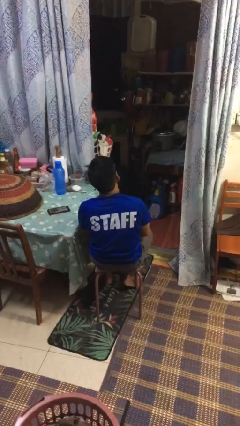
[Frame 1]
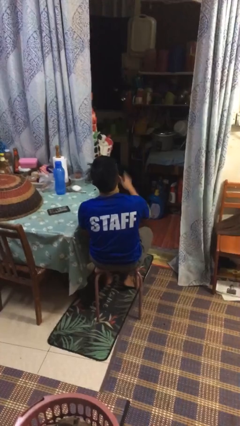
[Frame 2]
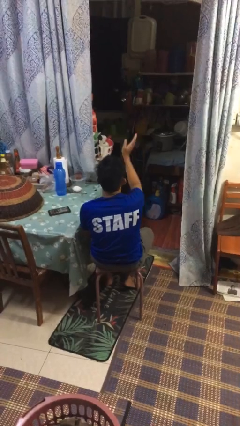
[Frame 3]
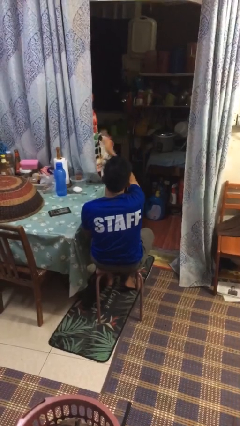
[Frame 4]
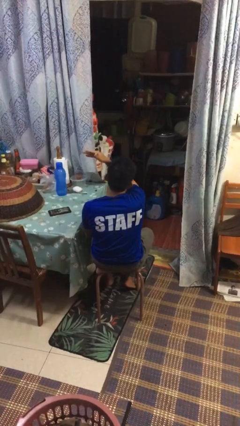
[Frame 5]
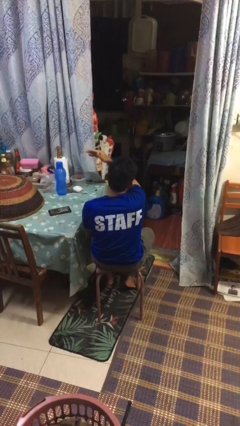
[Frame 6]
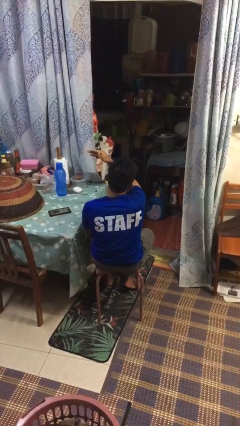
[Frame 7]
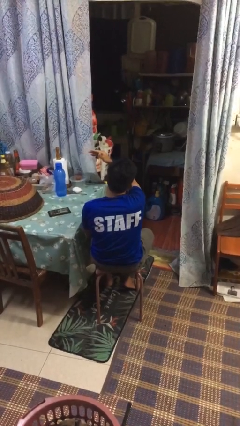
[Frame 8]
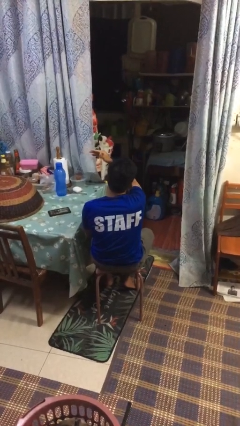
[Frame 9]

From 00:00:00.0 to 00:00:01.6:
person gestures swipe left

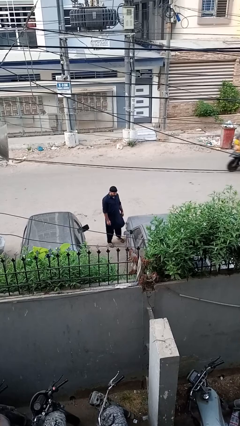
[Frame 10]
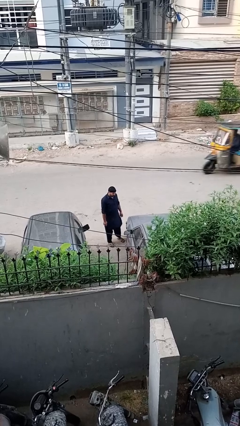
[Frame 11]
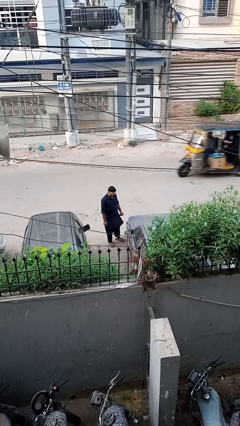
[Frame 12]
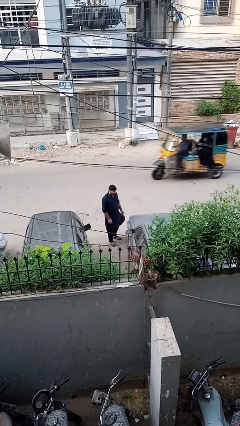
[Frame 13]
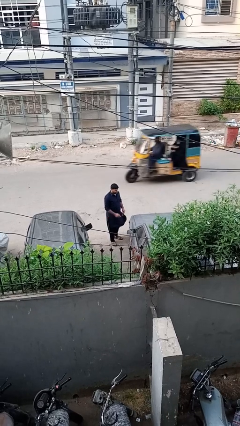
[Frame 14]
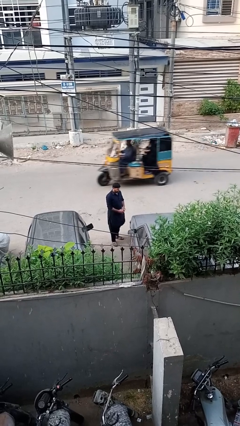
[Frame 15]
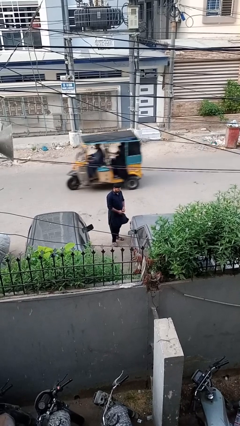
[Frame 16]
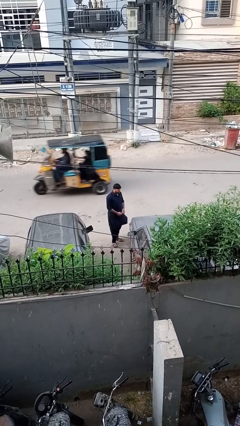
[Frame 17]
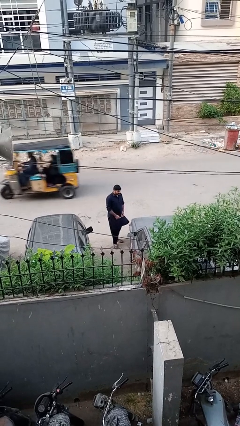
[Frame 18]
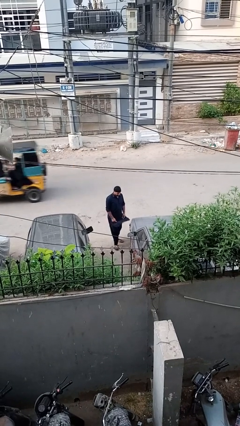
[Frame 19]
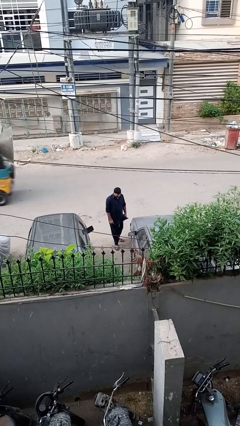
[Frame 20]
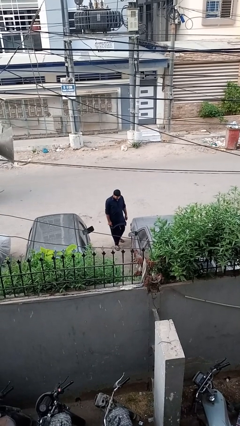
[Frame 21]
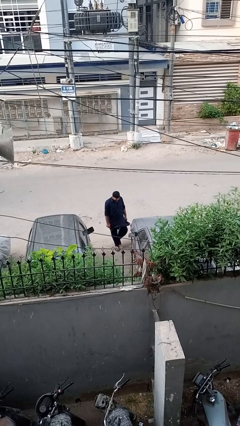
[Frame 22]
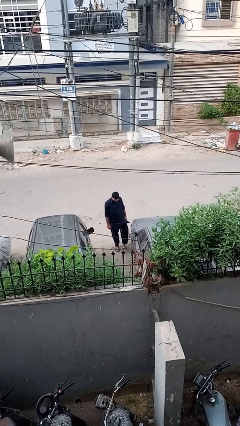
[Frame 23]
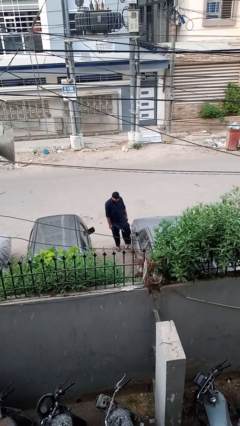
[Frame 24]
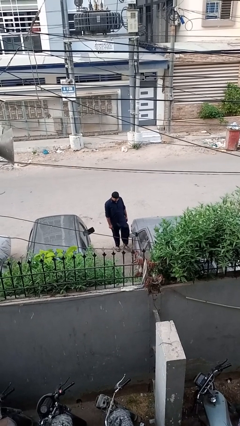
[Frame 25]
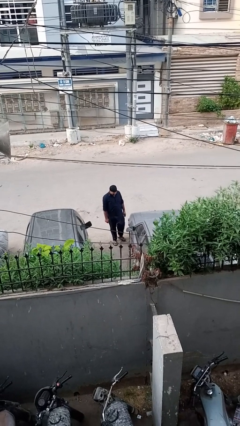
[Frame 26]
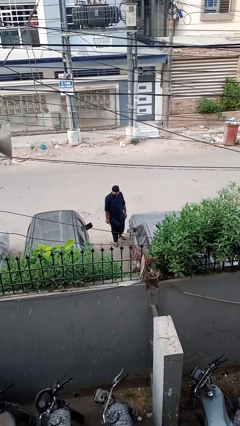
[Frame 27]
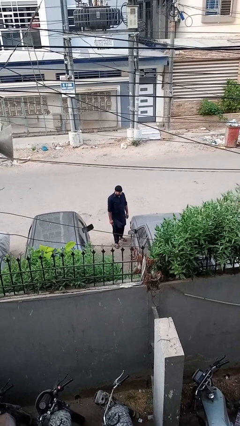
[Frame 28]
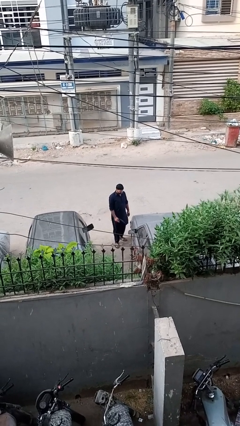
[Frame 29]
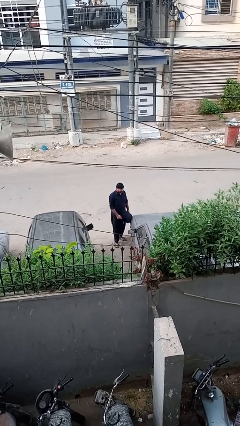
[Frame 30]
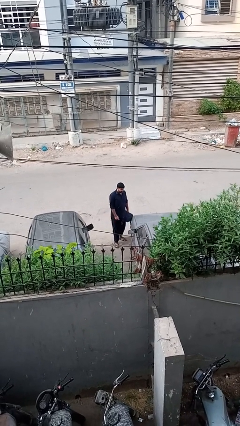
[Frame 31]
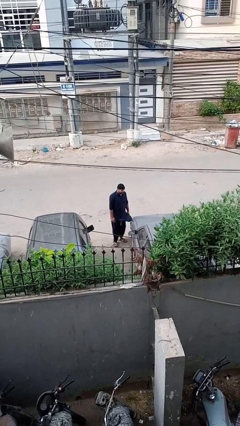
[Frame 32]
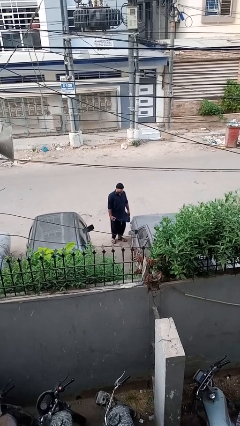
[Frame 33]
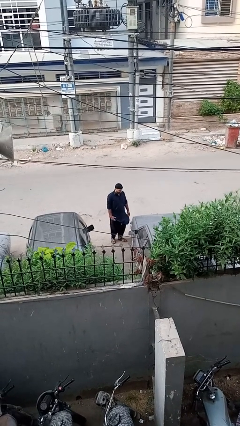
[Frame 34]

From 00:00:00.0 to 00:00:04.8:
person kicks car tires

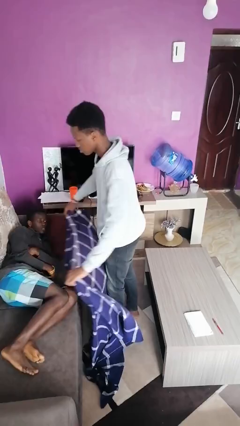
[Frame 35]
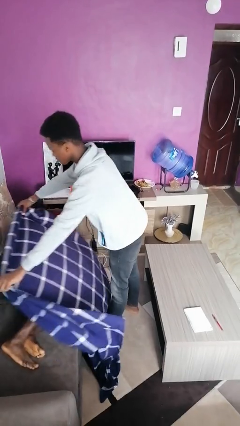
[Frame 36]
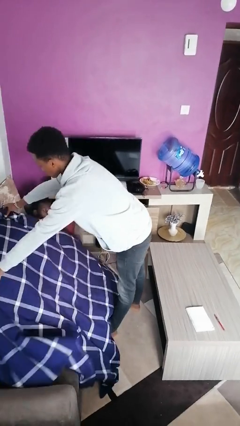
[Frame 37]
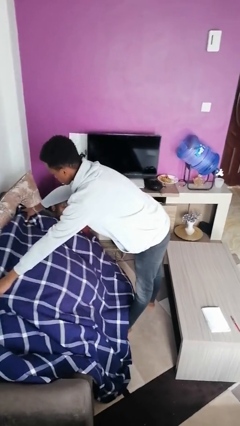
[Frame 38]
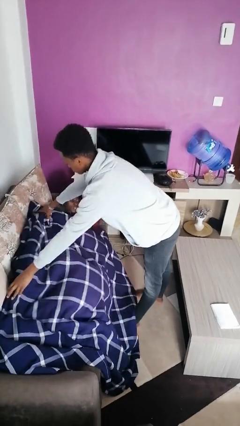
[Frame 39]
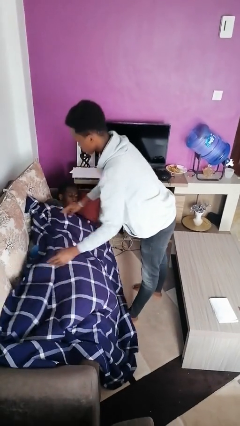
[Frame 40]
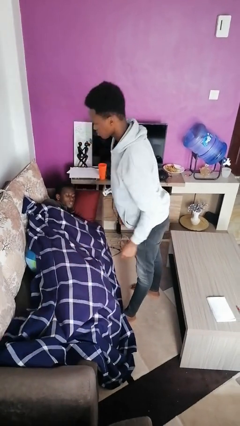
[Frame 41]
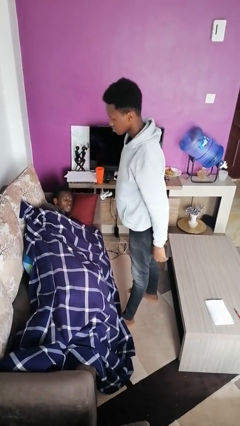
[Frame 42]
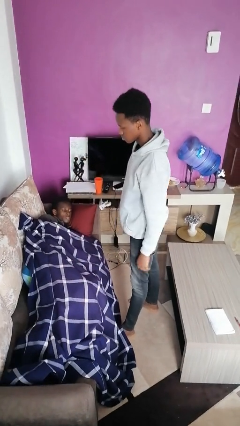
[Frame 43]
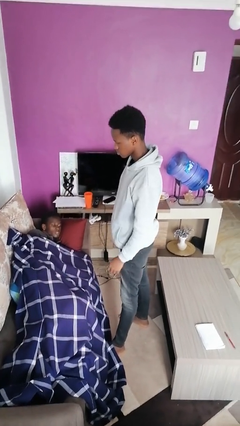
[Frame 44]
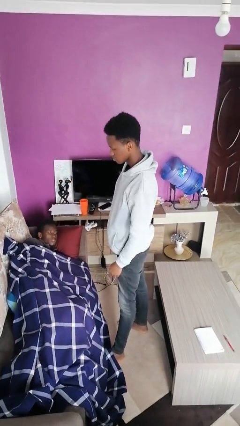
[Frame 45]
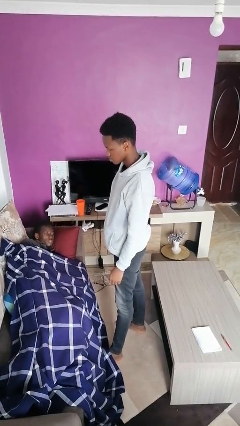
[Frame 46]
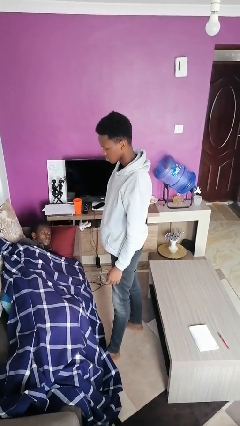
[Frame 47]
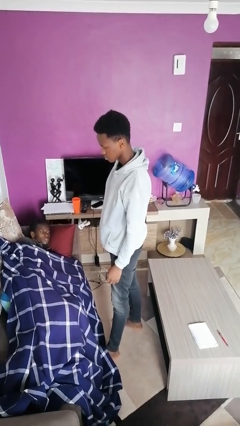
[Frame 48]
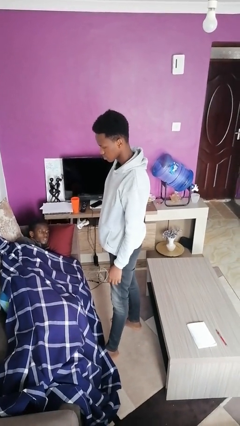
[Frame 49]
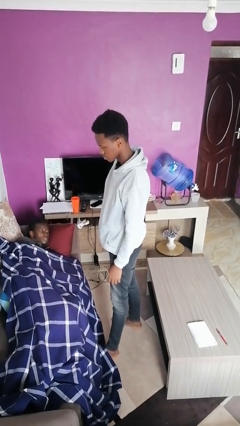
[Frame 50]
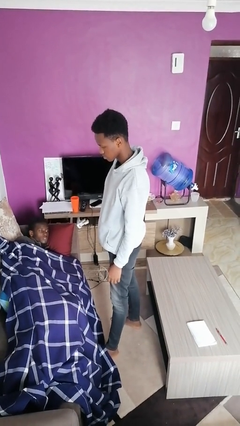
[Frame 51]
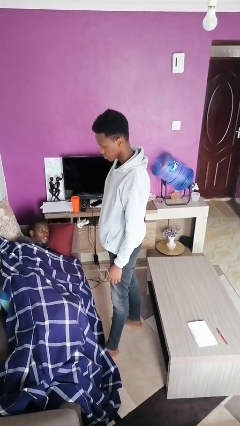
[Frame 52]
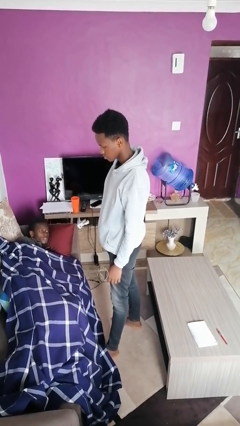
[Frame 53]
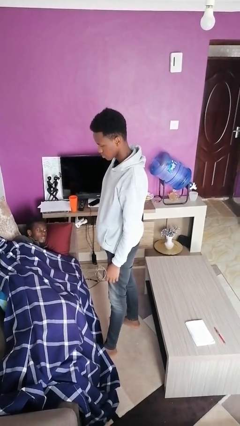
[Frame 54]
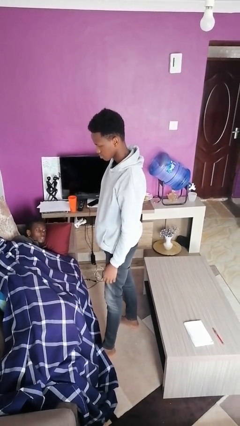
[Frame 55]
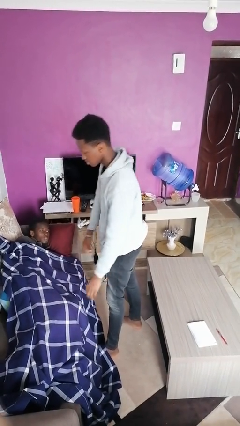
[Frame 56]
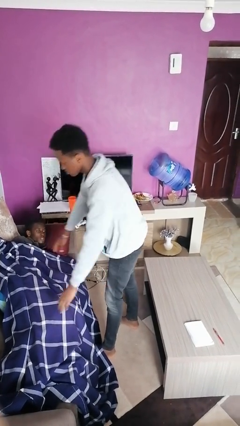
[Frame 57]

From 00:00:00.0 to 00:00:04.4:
person covers friend with blanket

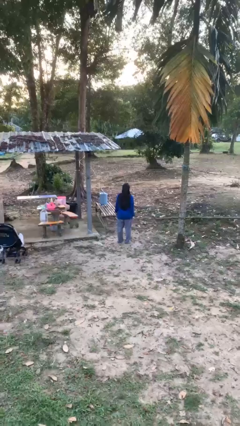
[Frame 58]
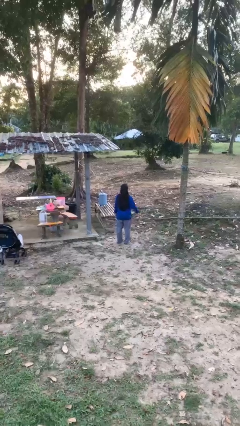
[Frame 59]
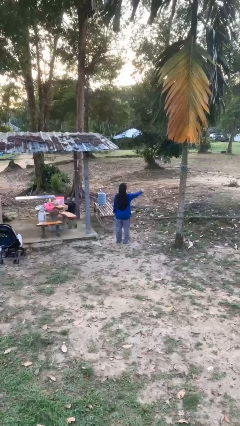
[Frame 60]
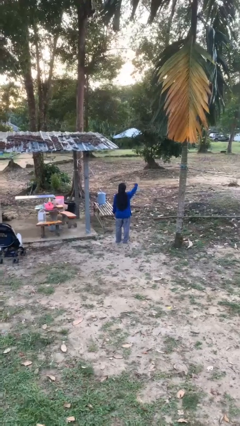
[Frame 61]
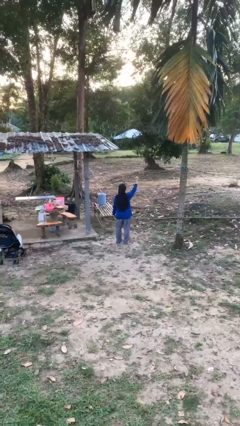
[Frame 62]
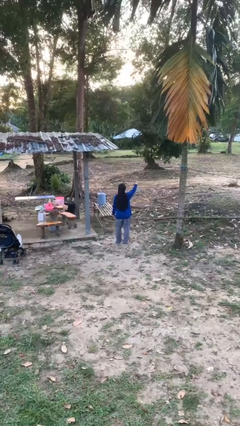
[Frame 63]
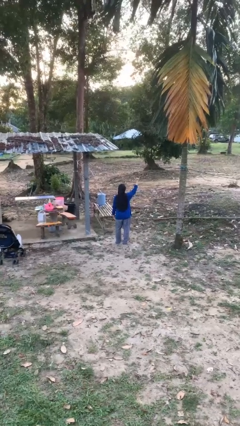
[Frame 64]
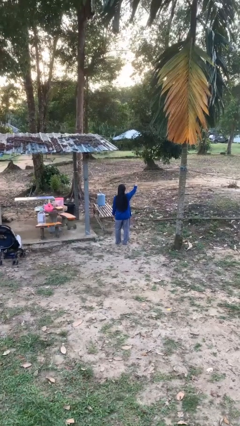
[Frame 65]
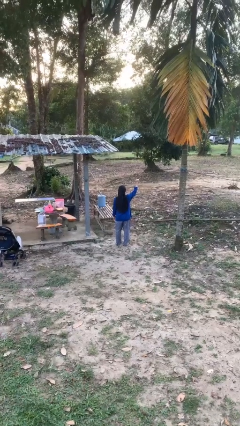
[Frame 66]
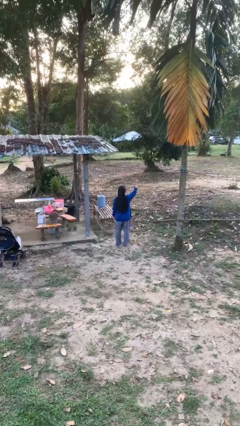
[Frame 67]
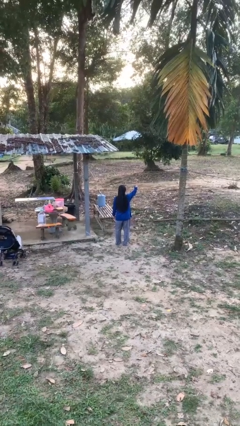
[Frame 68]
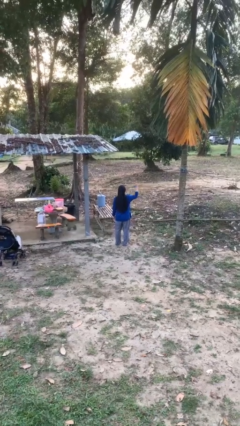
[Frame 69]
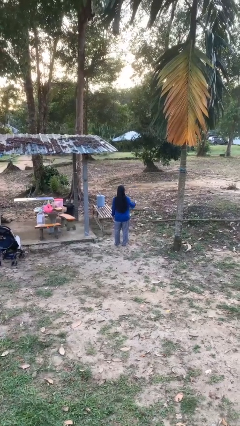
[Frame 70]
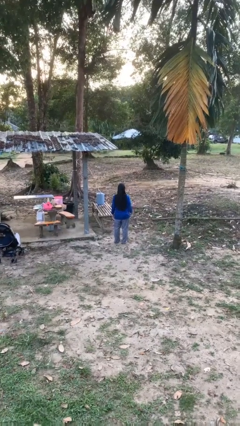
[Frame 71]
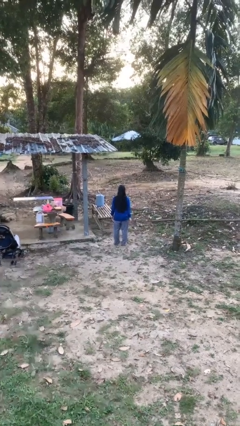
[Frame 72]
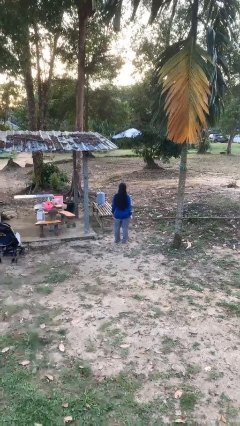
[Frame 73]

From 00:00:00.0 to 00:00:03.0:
person gestures hang loose

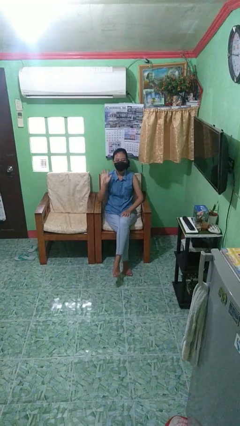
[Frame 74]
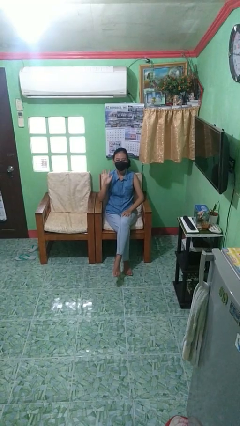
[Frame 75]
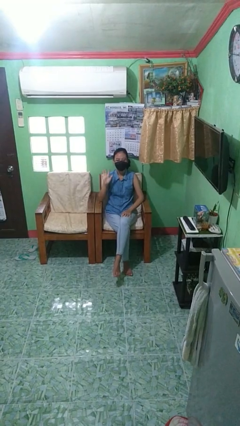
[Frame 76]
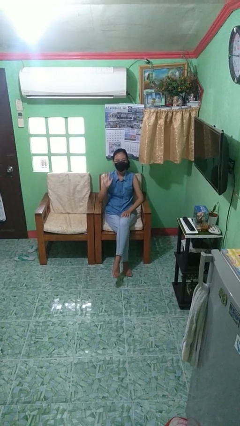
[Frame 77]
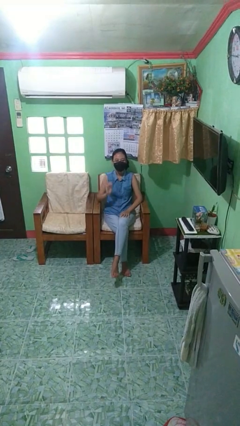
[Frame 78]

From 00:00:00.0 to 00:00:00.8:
person gestures number five

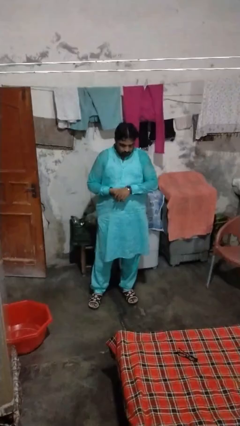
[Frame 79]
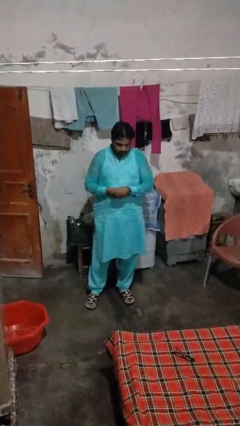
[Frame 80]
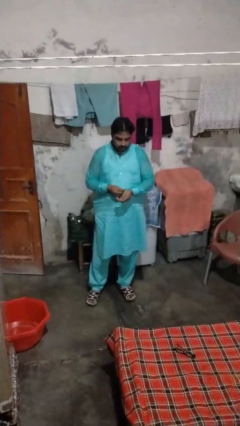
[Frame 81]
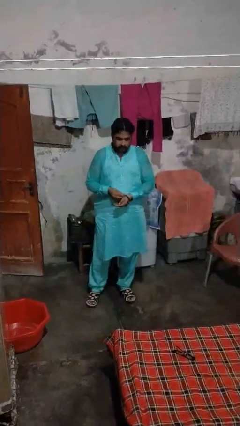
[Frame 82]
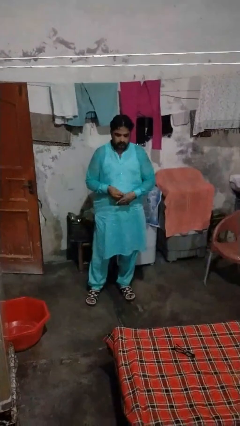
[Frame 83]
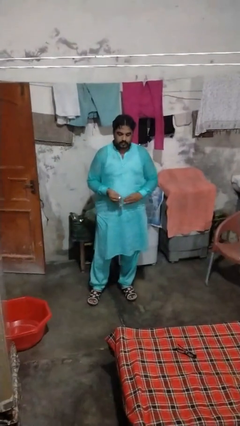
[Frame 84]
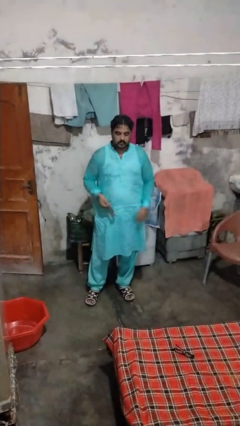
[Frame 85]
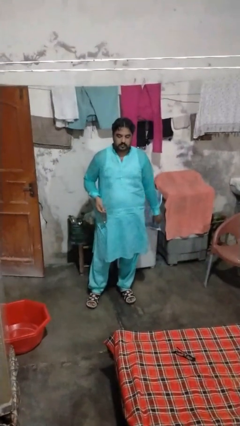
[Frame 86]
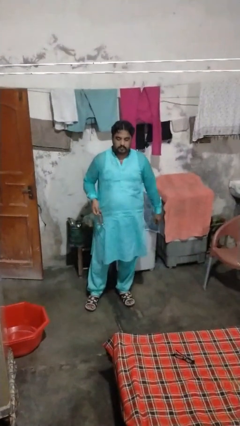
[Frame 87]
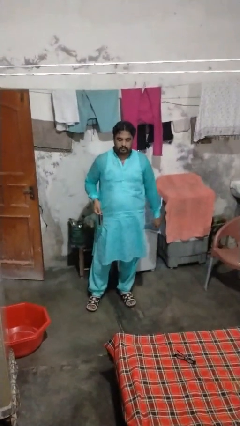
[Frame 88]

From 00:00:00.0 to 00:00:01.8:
person takes off wristwatch

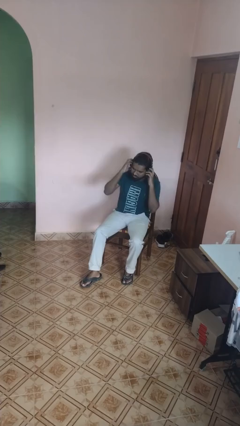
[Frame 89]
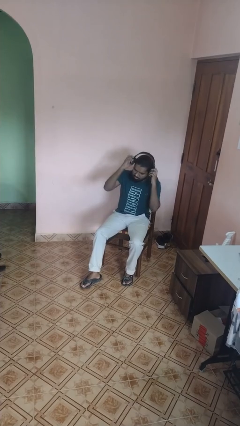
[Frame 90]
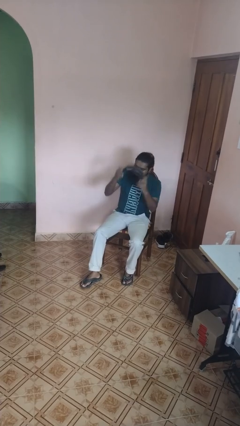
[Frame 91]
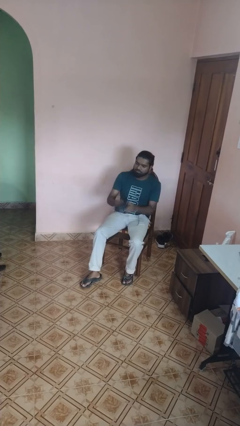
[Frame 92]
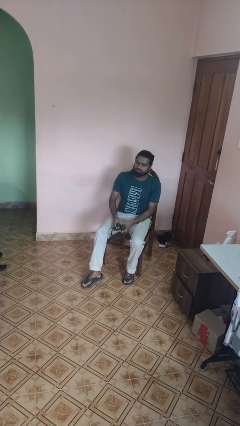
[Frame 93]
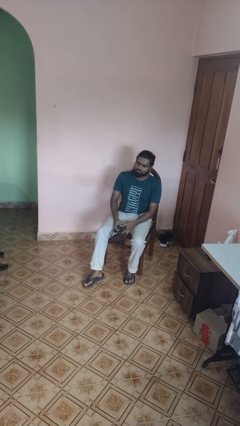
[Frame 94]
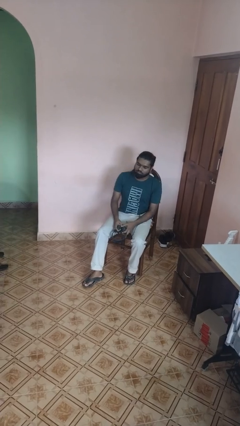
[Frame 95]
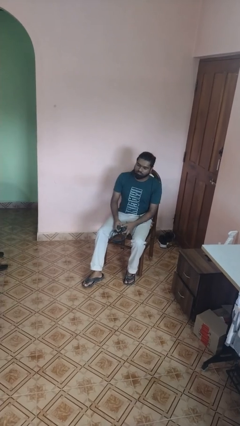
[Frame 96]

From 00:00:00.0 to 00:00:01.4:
person takes off headphones
